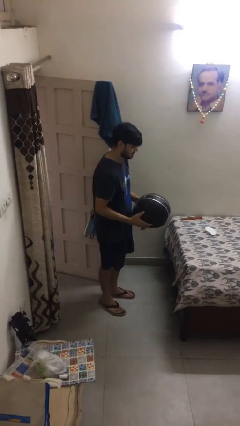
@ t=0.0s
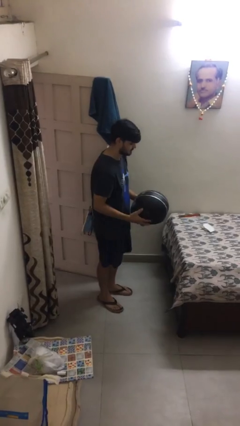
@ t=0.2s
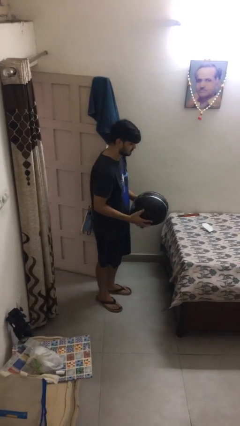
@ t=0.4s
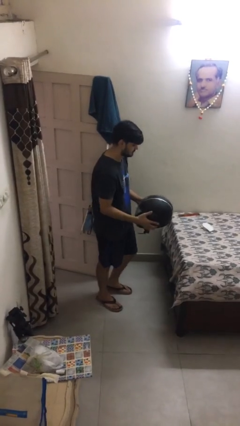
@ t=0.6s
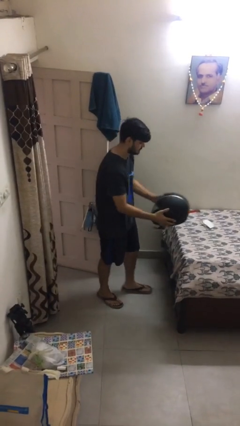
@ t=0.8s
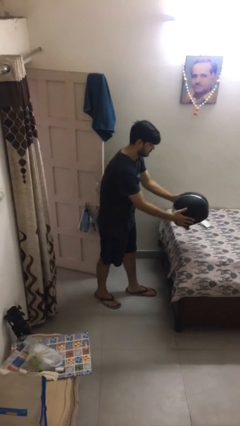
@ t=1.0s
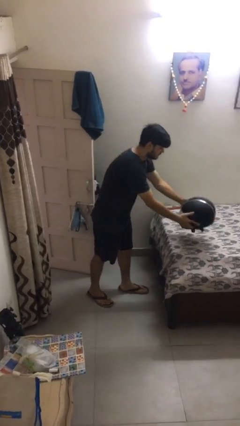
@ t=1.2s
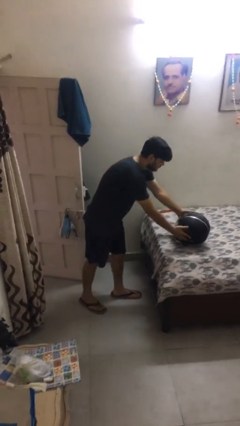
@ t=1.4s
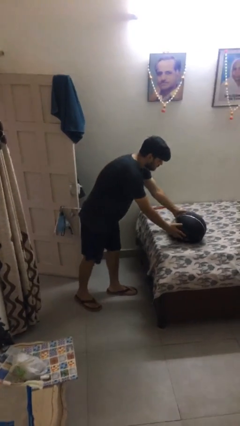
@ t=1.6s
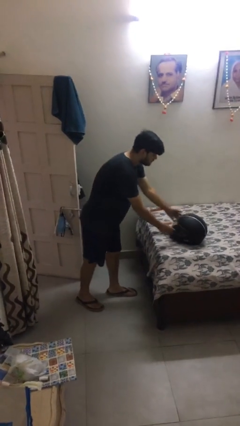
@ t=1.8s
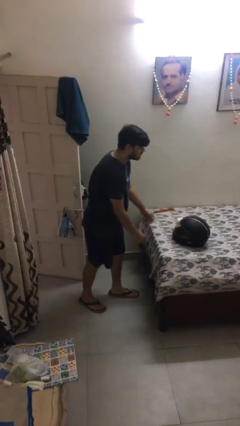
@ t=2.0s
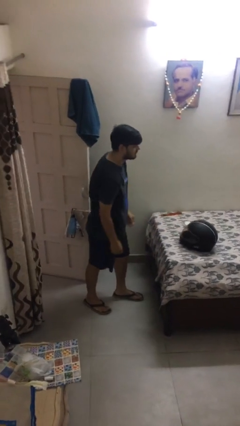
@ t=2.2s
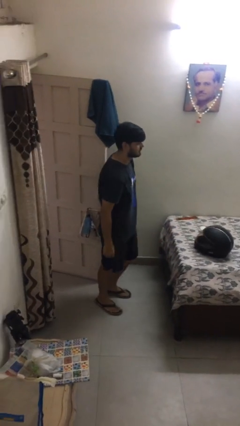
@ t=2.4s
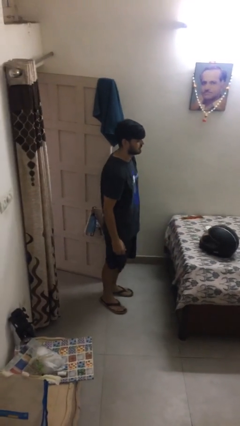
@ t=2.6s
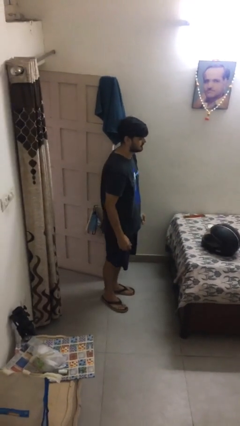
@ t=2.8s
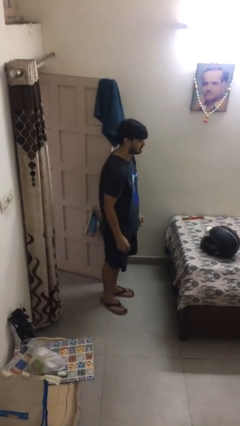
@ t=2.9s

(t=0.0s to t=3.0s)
person puts down object on bed

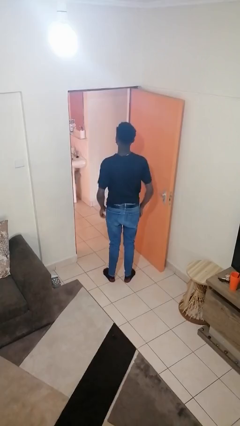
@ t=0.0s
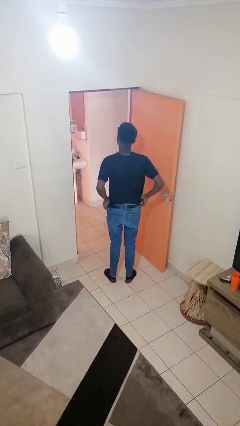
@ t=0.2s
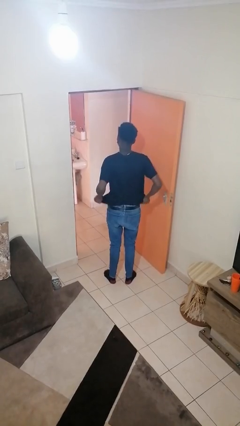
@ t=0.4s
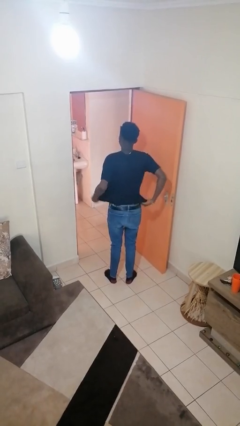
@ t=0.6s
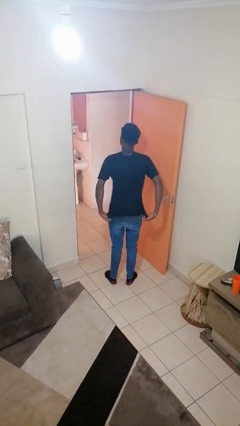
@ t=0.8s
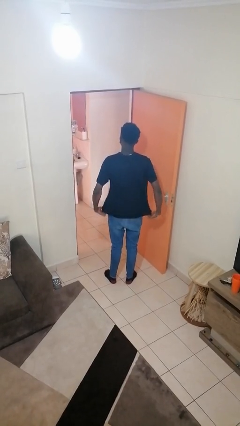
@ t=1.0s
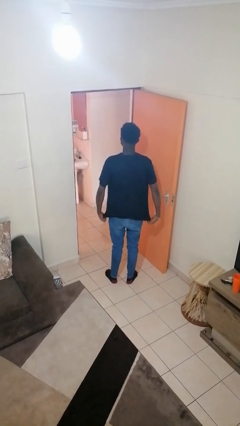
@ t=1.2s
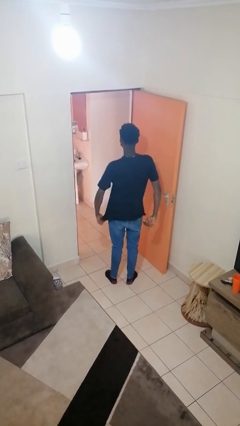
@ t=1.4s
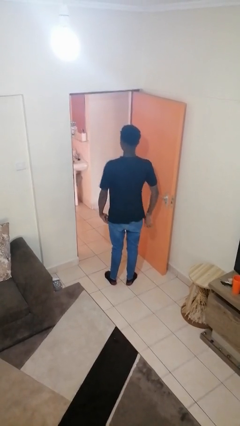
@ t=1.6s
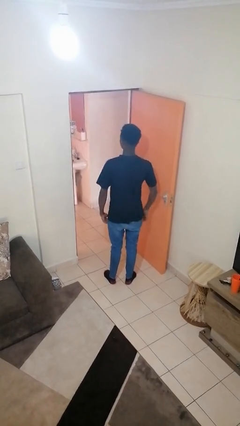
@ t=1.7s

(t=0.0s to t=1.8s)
person untucks shirt

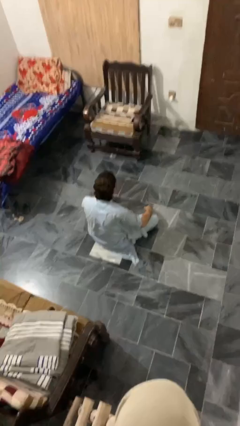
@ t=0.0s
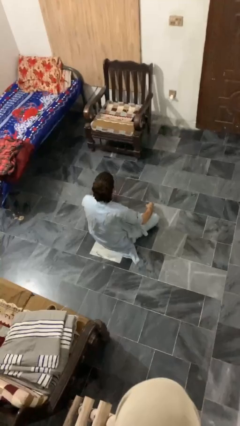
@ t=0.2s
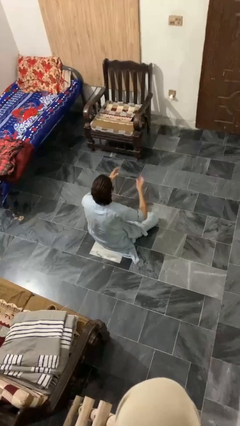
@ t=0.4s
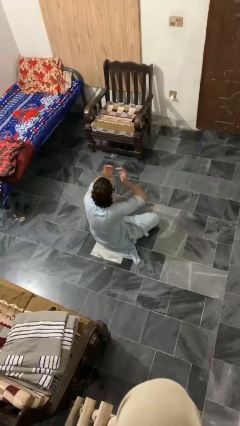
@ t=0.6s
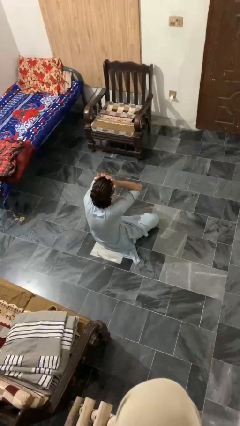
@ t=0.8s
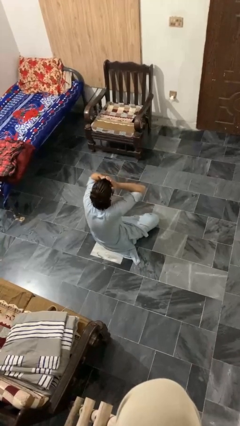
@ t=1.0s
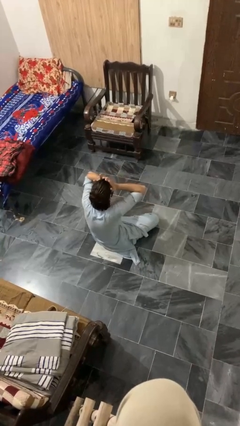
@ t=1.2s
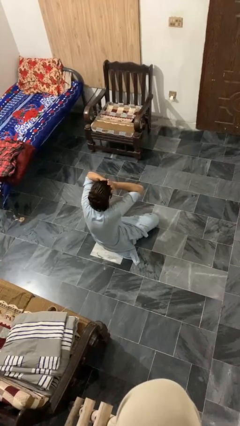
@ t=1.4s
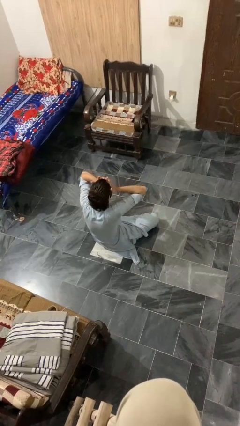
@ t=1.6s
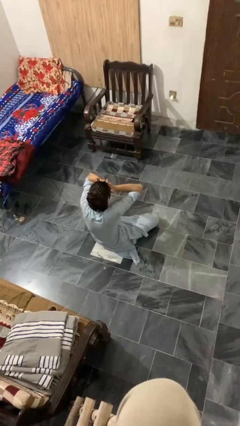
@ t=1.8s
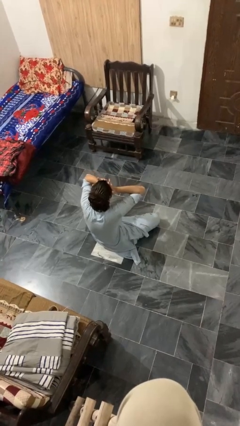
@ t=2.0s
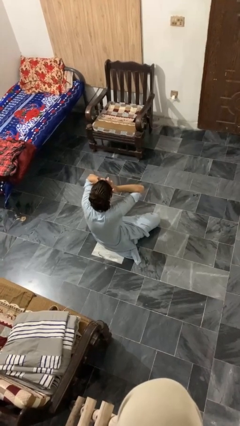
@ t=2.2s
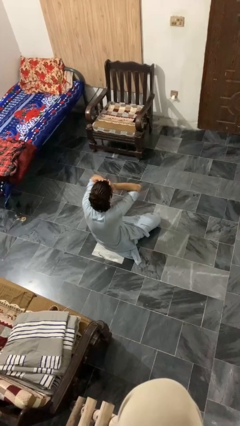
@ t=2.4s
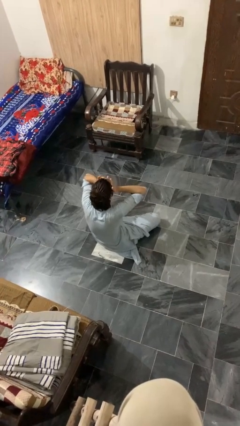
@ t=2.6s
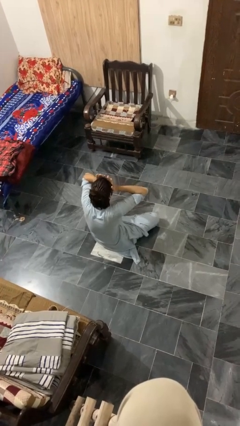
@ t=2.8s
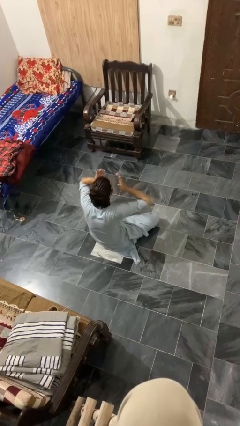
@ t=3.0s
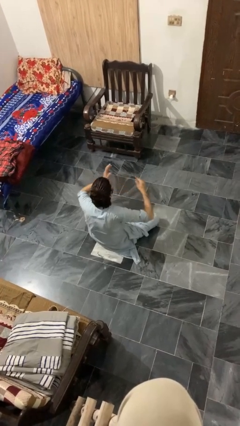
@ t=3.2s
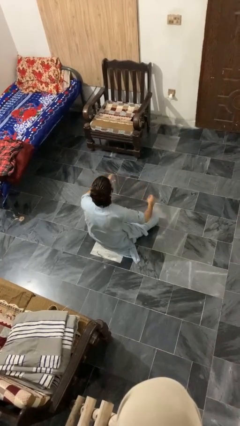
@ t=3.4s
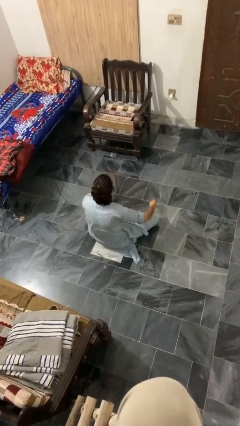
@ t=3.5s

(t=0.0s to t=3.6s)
person rubs eyes

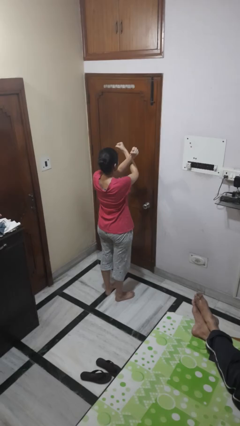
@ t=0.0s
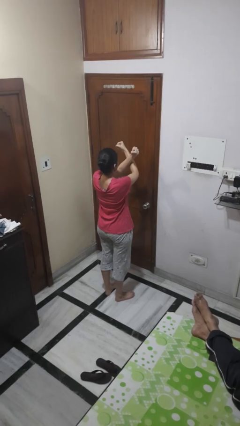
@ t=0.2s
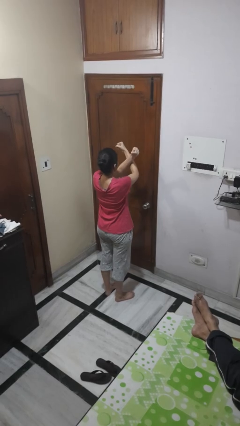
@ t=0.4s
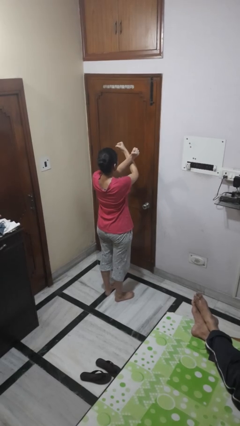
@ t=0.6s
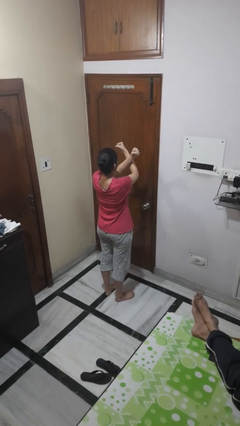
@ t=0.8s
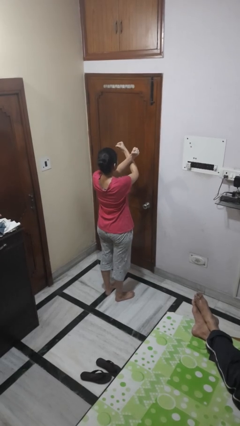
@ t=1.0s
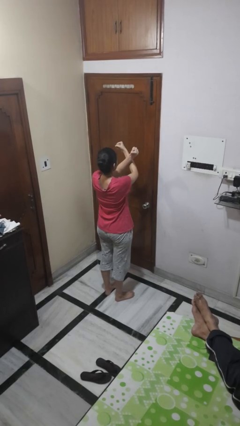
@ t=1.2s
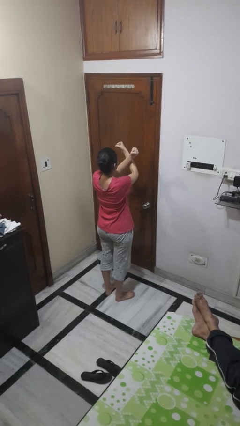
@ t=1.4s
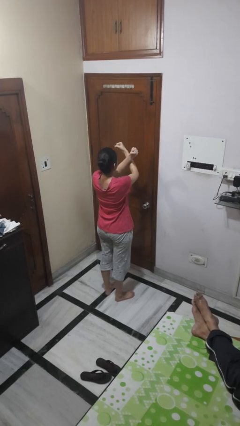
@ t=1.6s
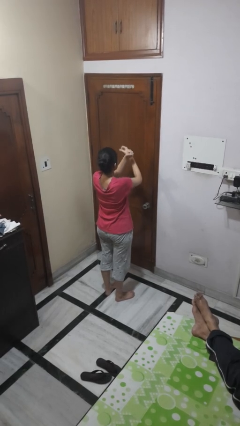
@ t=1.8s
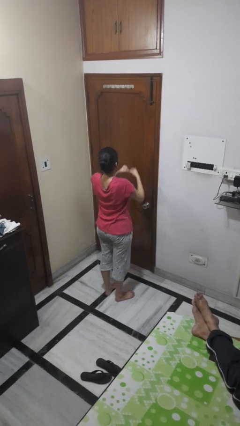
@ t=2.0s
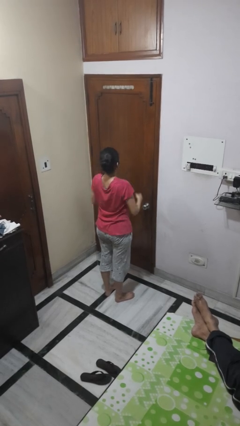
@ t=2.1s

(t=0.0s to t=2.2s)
person gestures arms x

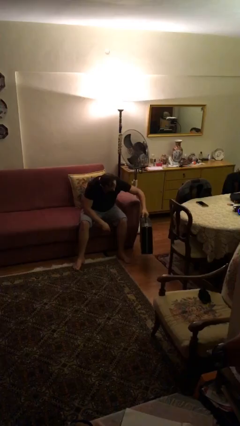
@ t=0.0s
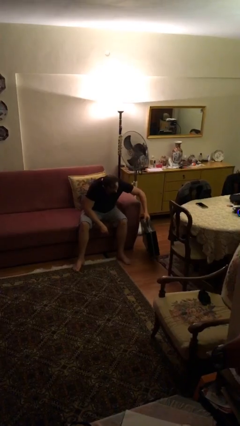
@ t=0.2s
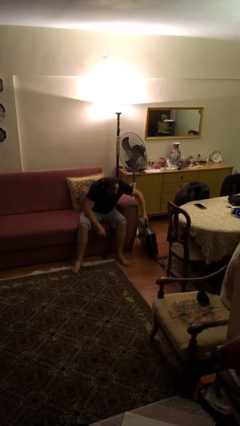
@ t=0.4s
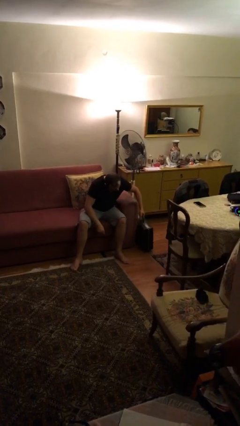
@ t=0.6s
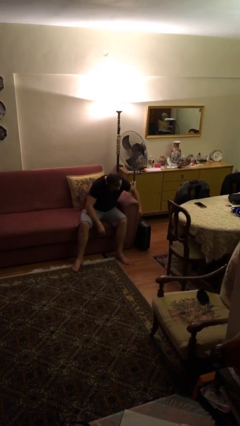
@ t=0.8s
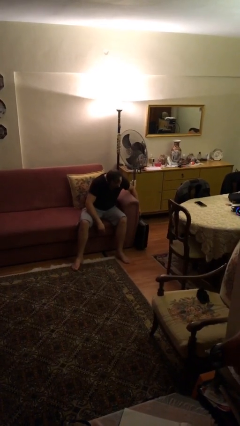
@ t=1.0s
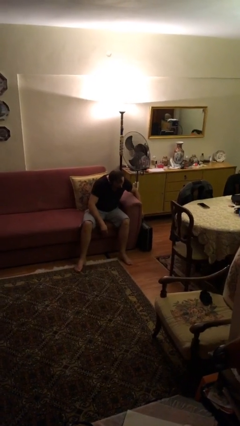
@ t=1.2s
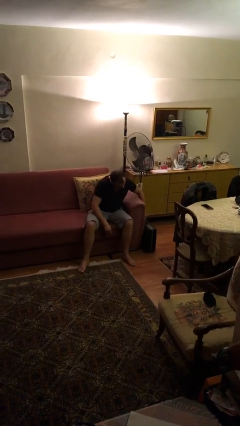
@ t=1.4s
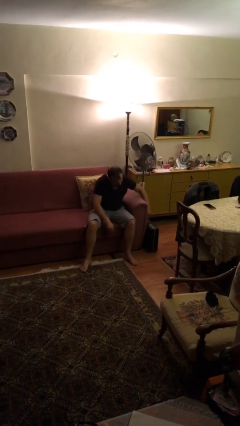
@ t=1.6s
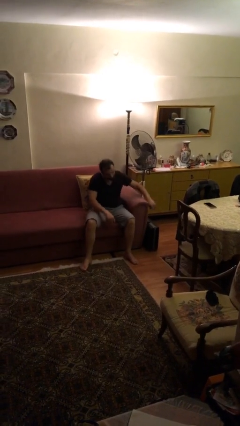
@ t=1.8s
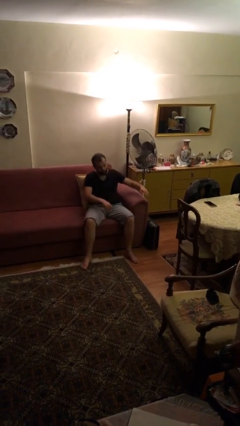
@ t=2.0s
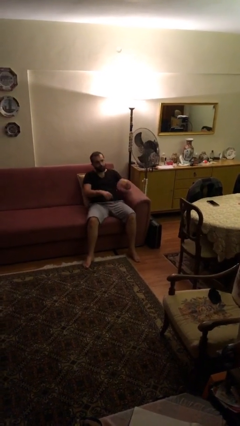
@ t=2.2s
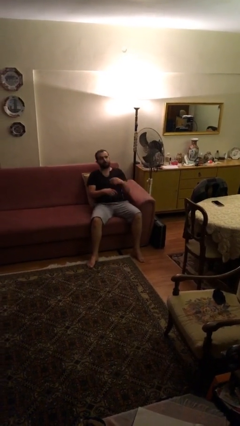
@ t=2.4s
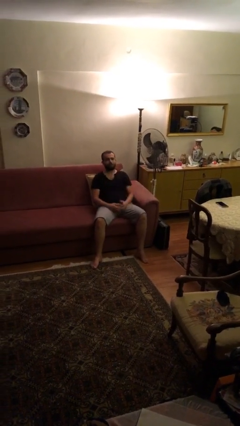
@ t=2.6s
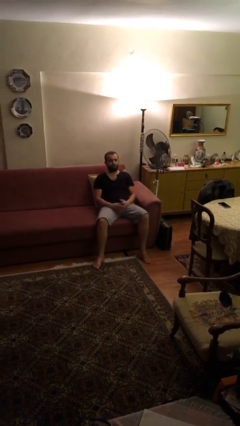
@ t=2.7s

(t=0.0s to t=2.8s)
person puts down object on floor

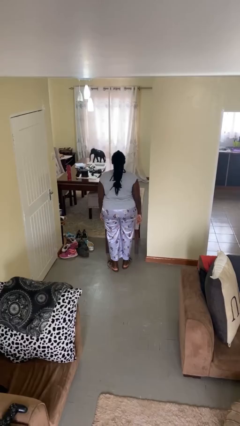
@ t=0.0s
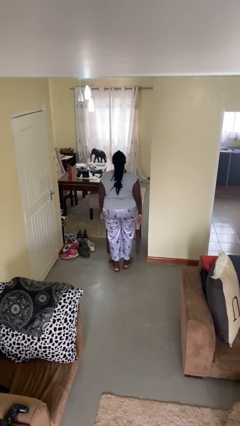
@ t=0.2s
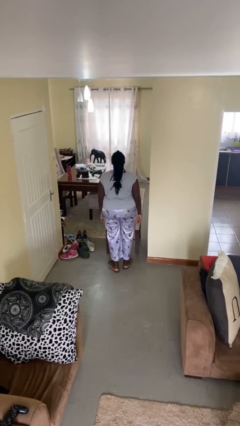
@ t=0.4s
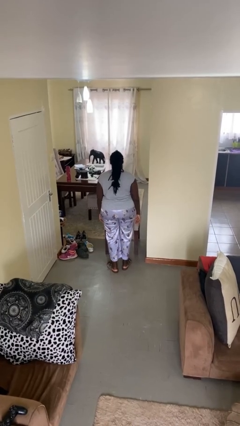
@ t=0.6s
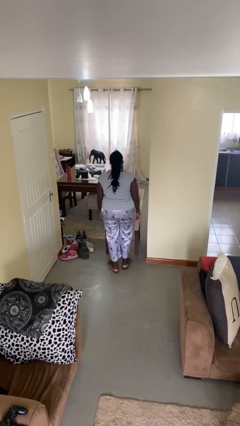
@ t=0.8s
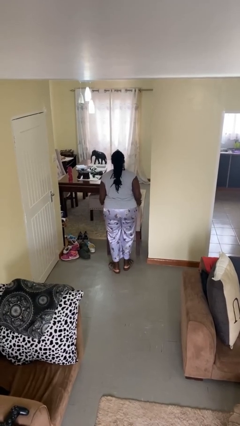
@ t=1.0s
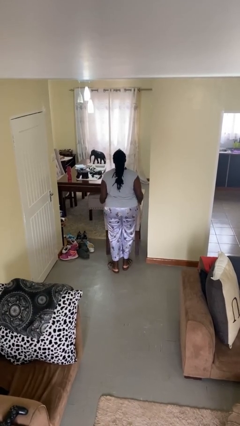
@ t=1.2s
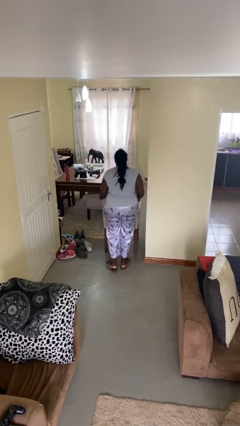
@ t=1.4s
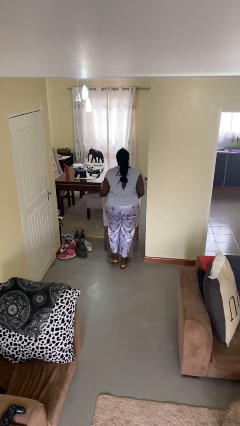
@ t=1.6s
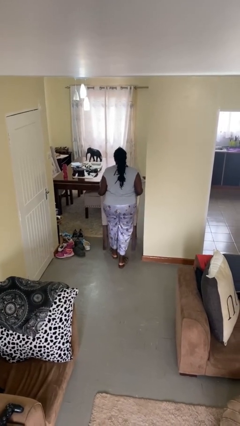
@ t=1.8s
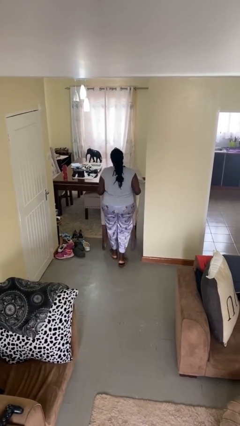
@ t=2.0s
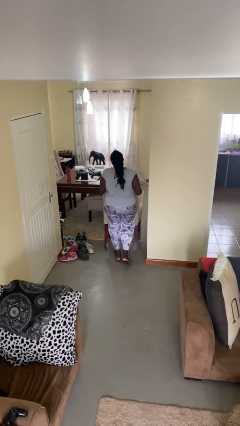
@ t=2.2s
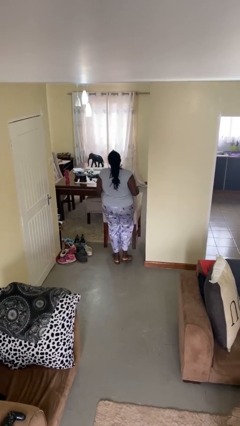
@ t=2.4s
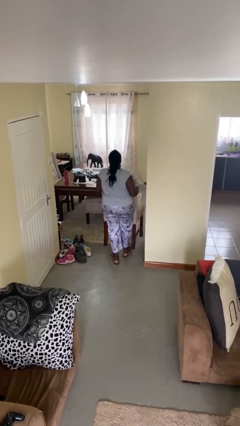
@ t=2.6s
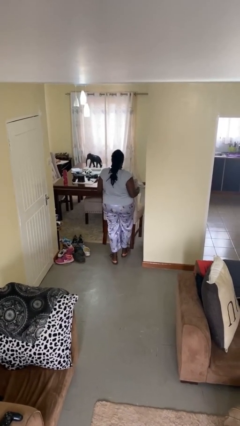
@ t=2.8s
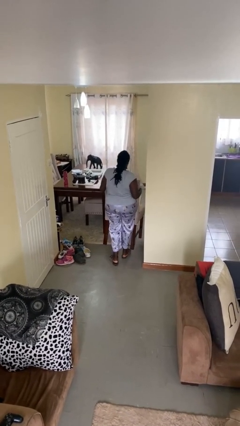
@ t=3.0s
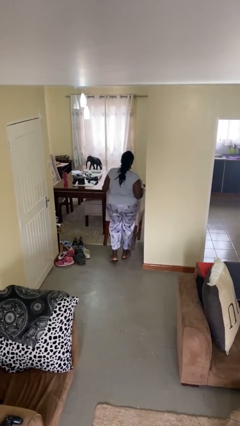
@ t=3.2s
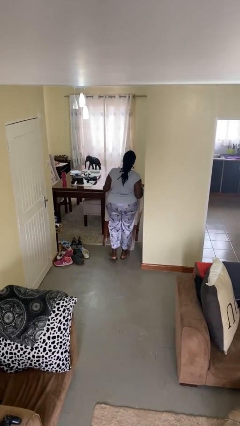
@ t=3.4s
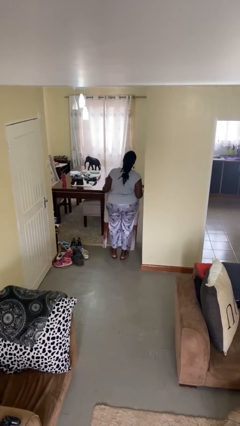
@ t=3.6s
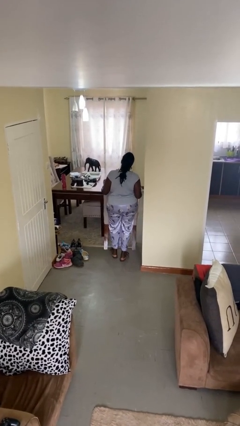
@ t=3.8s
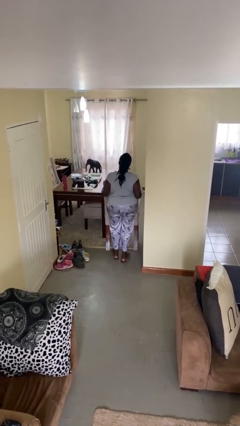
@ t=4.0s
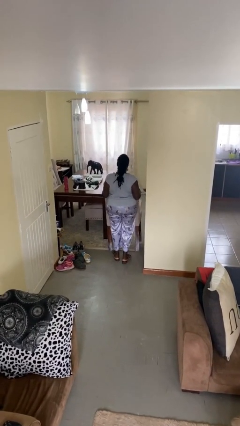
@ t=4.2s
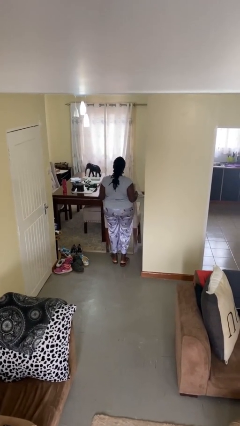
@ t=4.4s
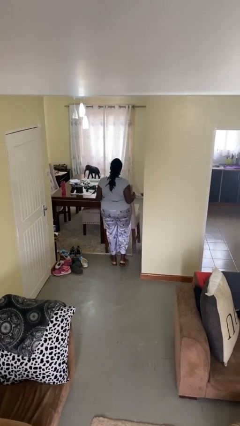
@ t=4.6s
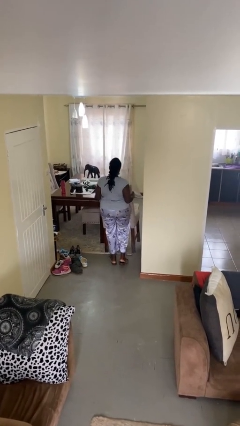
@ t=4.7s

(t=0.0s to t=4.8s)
person carries furniture
